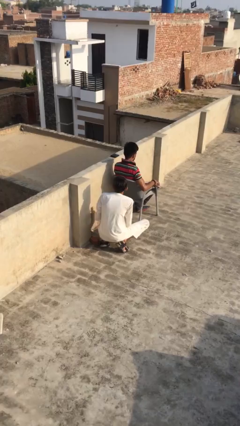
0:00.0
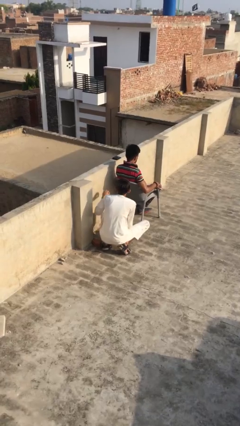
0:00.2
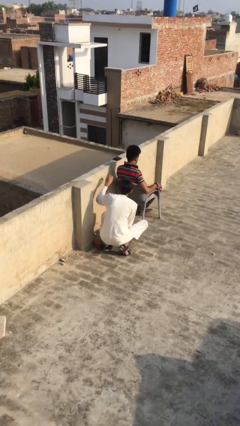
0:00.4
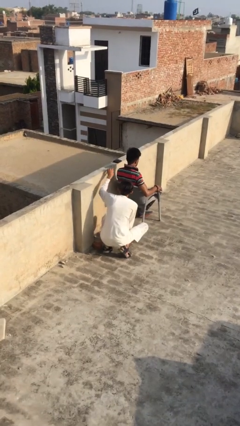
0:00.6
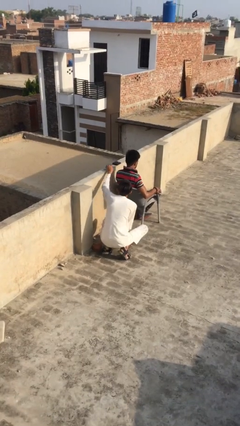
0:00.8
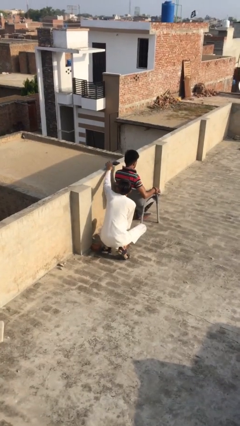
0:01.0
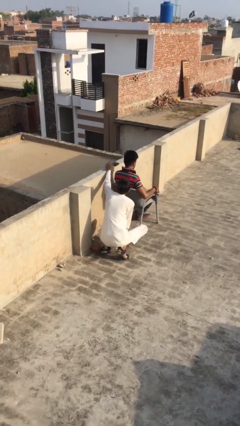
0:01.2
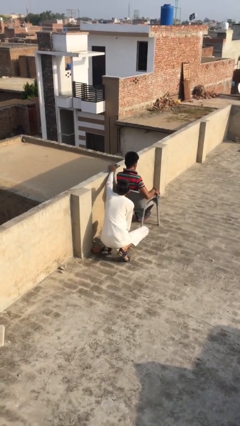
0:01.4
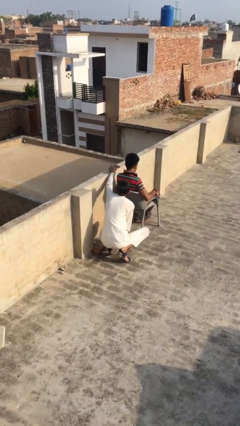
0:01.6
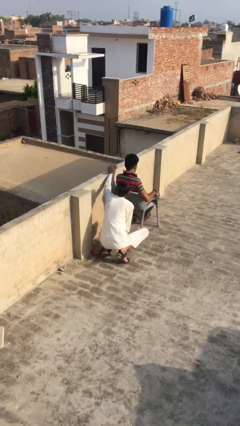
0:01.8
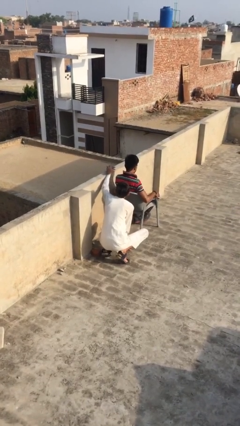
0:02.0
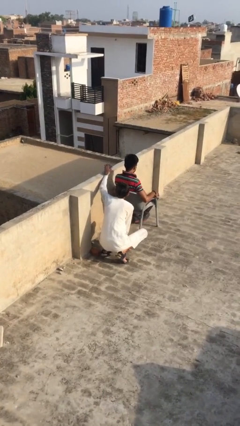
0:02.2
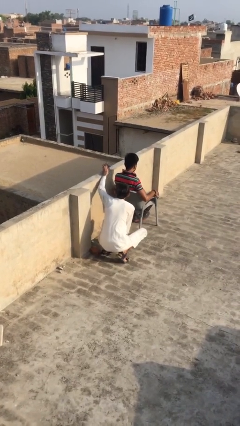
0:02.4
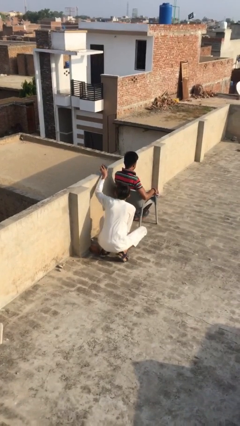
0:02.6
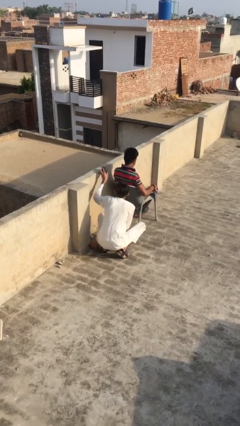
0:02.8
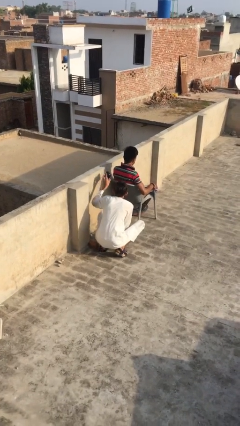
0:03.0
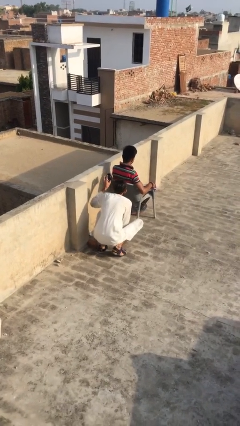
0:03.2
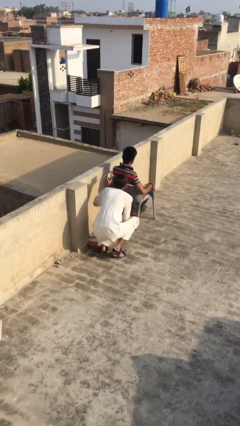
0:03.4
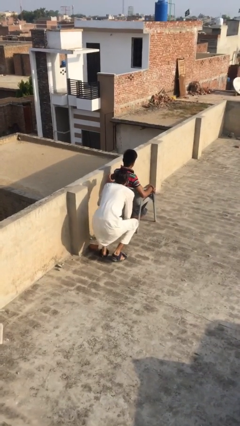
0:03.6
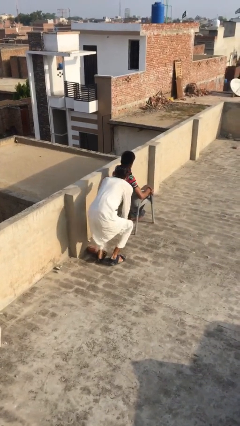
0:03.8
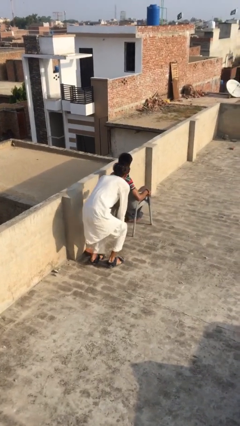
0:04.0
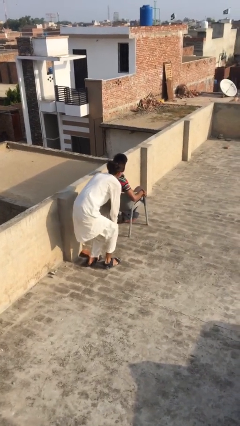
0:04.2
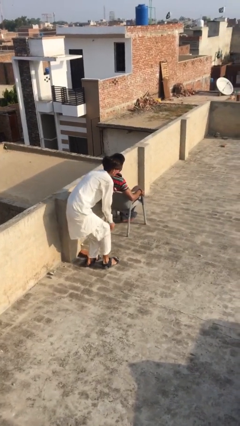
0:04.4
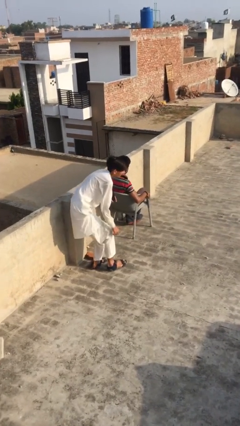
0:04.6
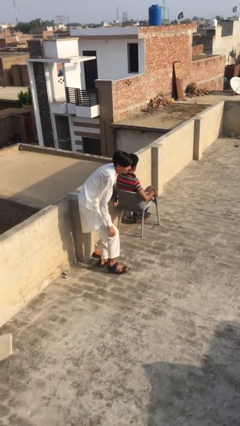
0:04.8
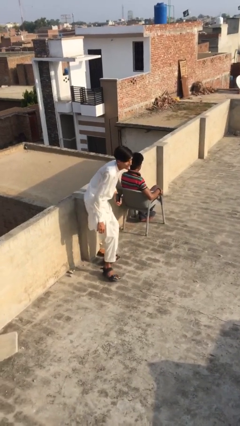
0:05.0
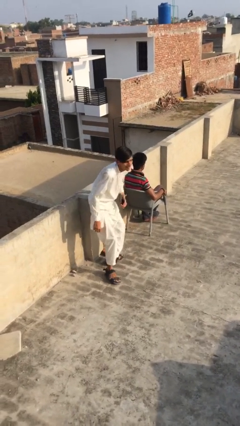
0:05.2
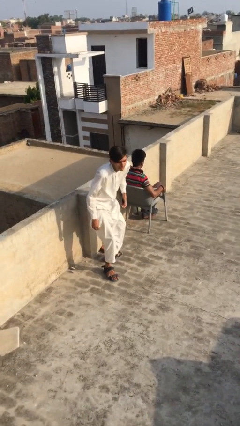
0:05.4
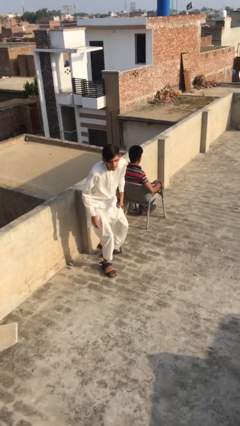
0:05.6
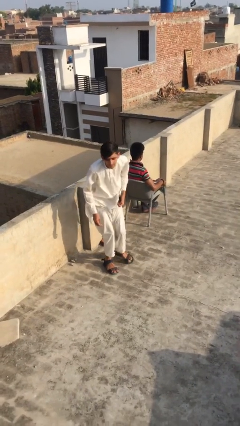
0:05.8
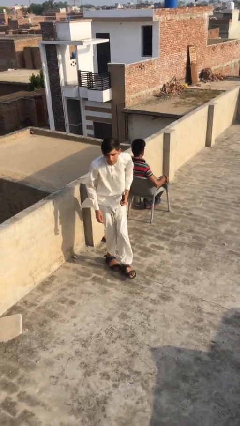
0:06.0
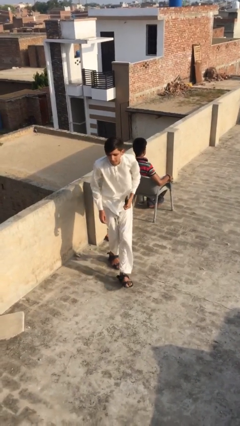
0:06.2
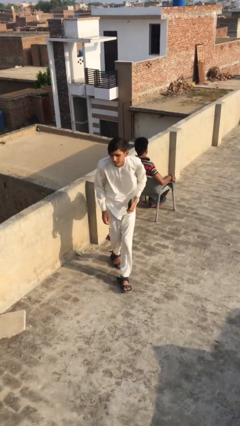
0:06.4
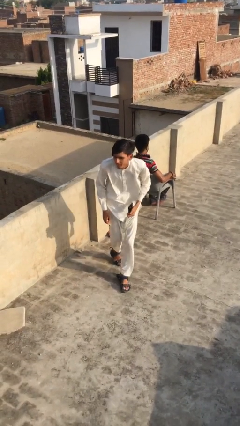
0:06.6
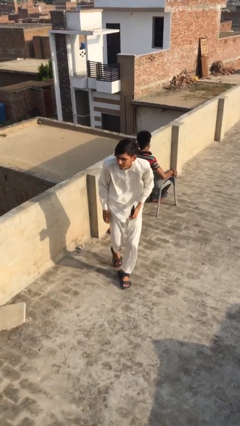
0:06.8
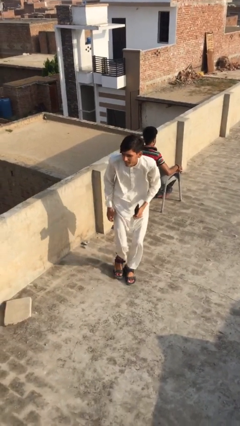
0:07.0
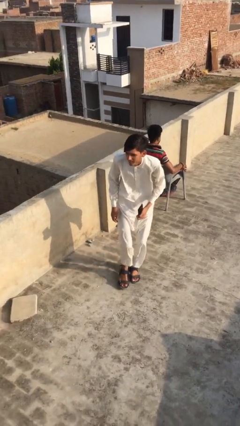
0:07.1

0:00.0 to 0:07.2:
person steals object from person

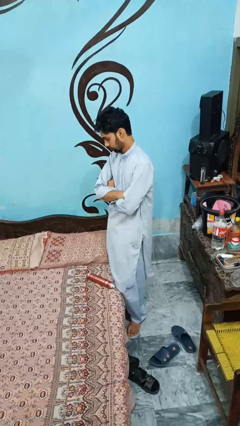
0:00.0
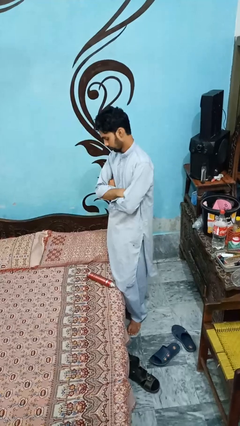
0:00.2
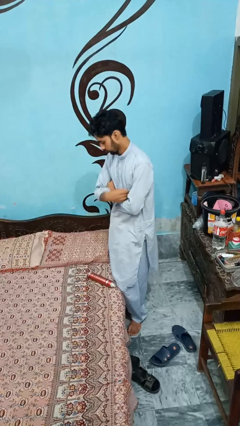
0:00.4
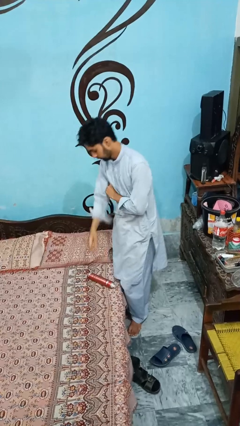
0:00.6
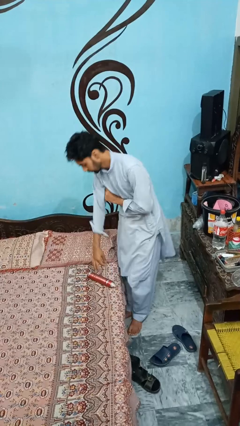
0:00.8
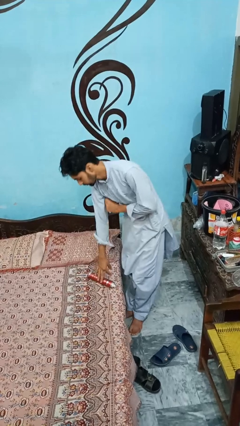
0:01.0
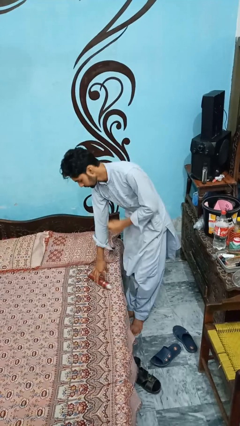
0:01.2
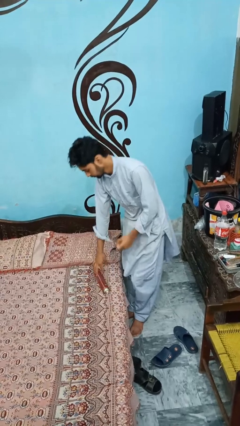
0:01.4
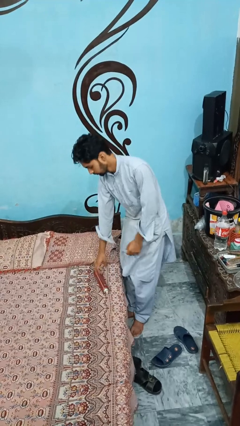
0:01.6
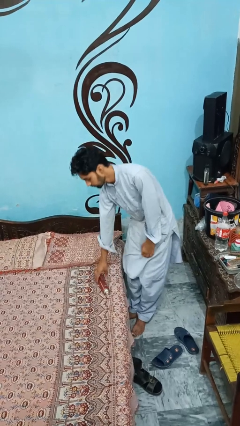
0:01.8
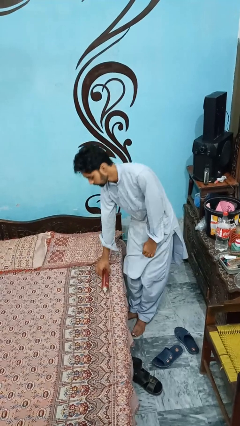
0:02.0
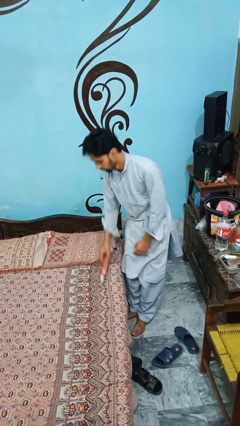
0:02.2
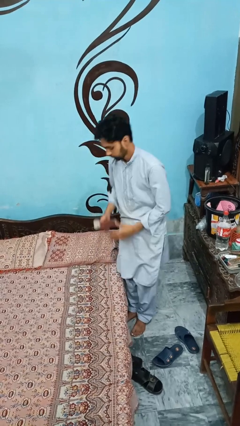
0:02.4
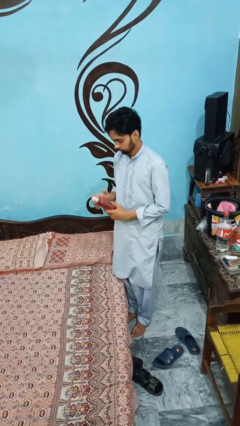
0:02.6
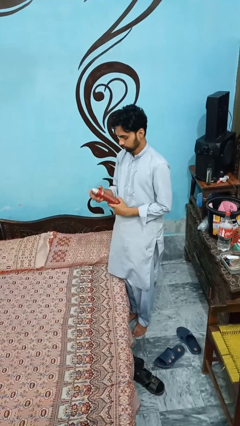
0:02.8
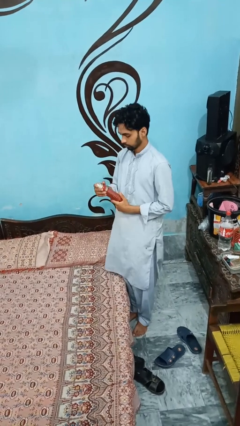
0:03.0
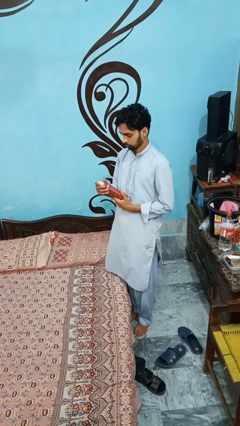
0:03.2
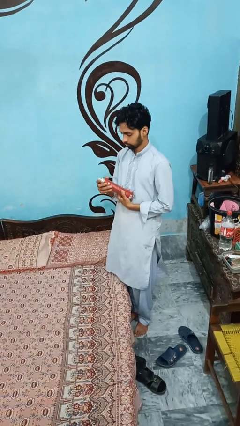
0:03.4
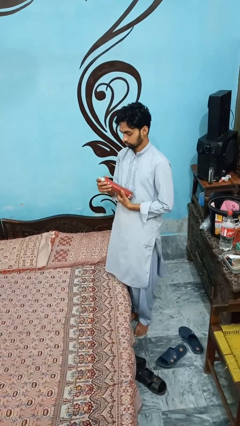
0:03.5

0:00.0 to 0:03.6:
person picks up object from bed

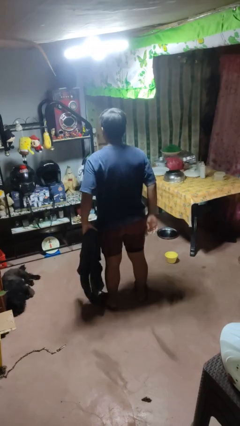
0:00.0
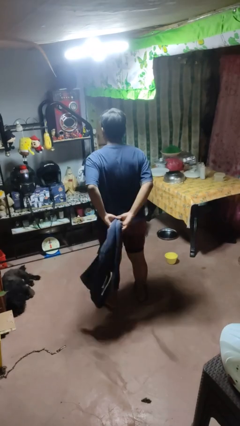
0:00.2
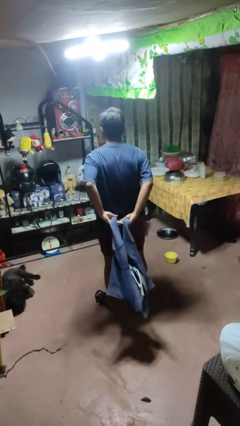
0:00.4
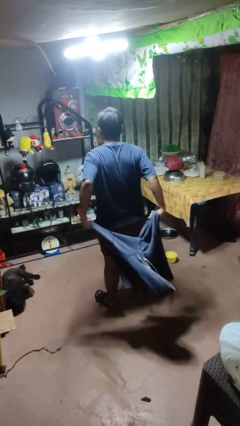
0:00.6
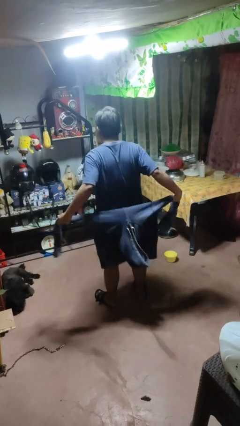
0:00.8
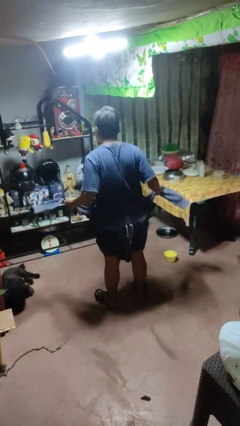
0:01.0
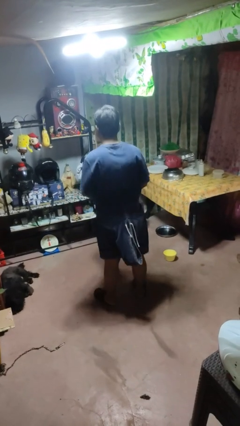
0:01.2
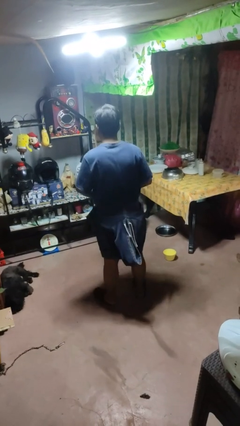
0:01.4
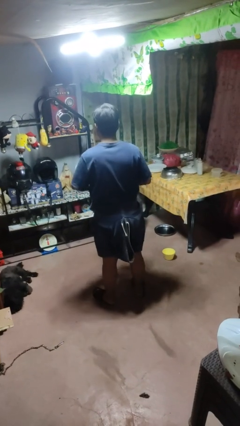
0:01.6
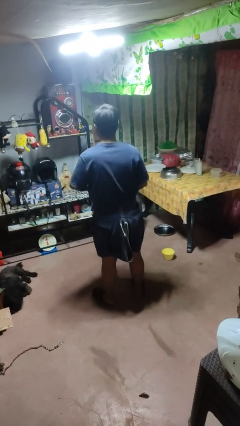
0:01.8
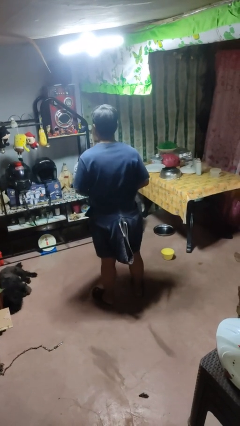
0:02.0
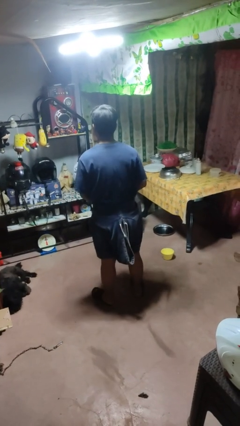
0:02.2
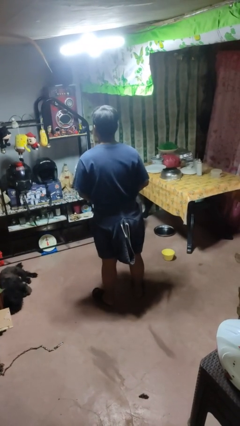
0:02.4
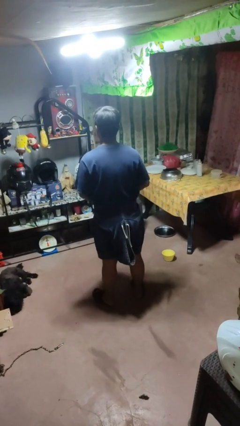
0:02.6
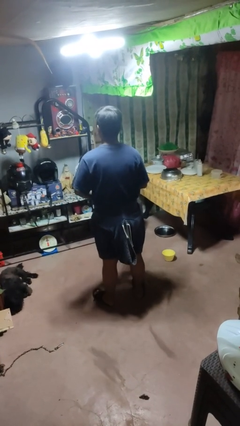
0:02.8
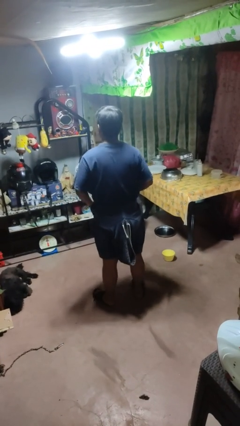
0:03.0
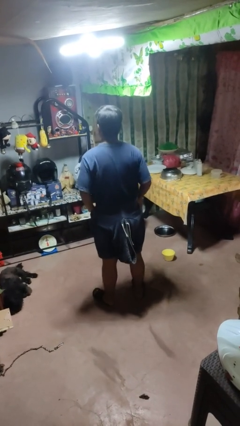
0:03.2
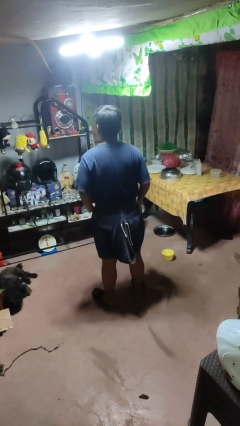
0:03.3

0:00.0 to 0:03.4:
person ties jacket around waist

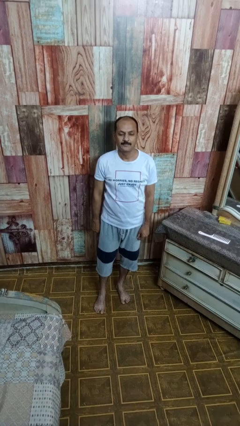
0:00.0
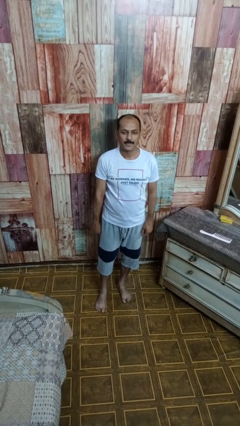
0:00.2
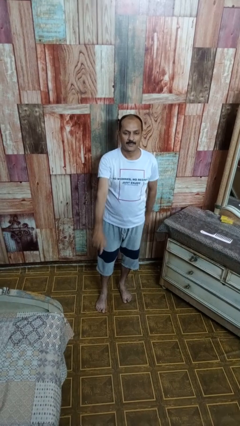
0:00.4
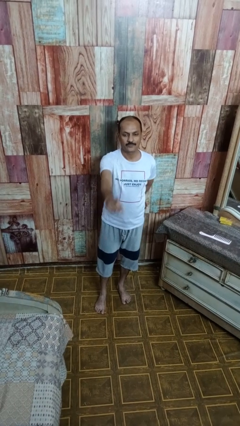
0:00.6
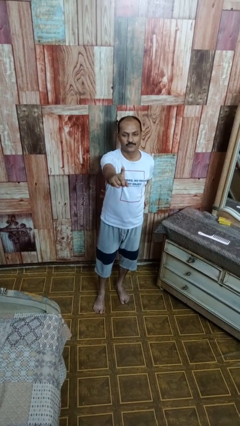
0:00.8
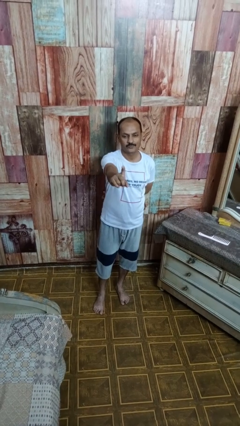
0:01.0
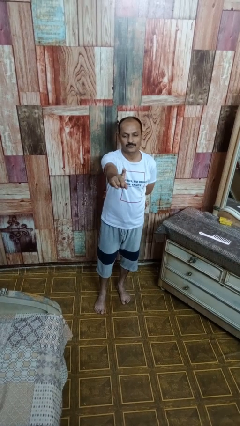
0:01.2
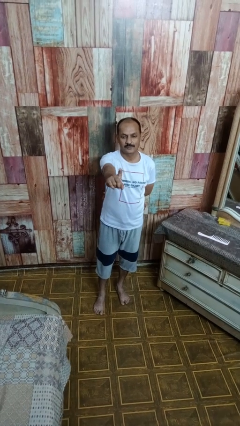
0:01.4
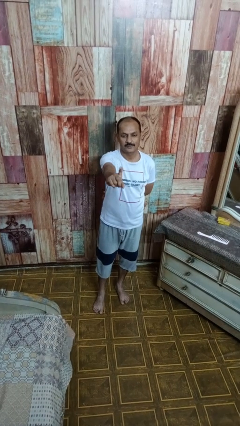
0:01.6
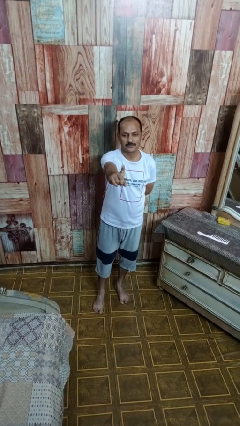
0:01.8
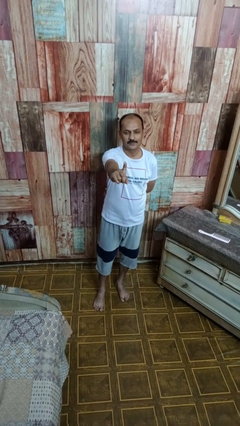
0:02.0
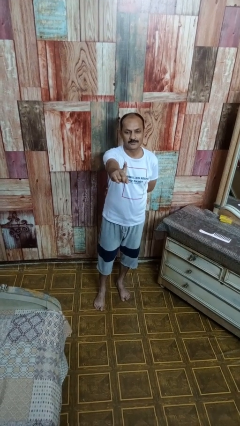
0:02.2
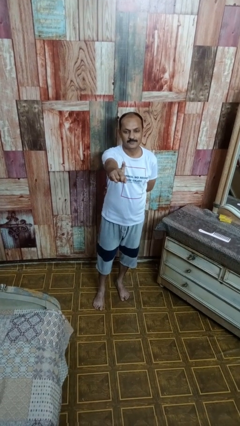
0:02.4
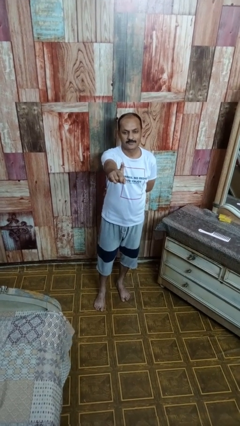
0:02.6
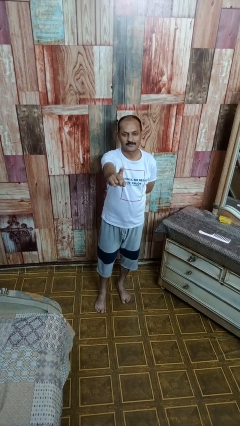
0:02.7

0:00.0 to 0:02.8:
person gestures number one

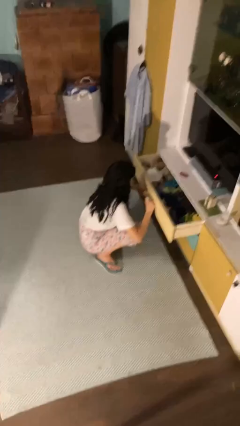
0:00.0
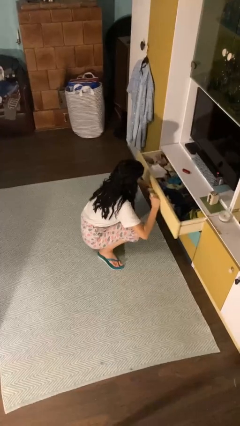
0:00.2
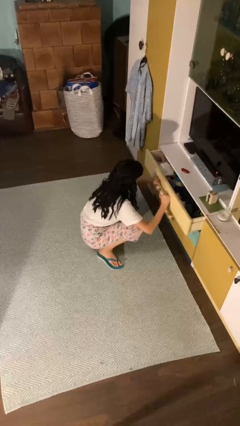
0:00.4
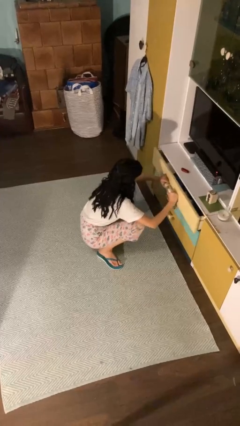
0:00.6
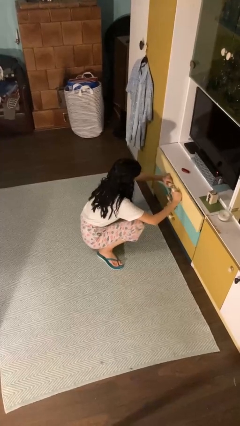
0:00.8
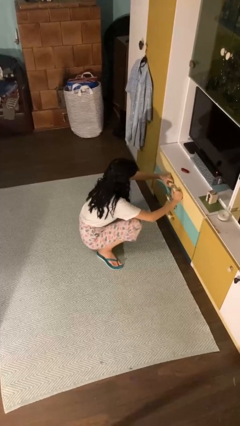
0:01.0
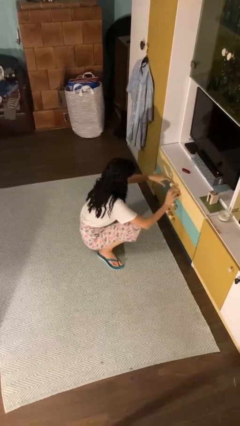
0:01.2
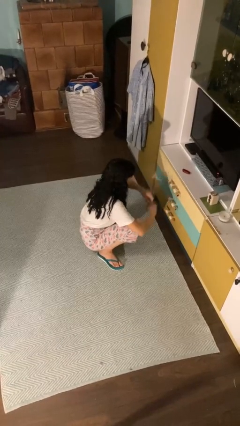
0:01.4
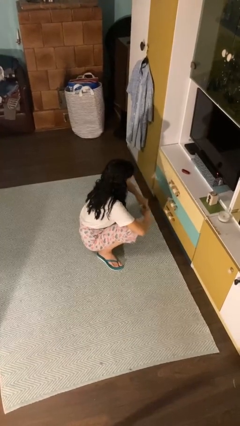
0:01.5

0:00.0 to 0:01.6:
person closes dresser drawer
